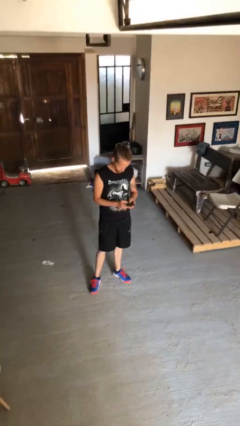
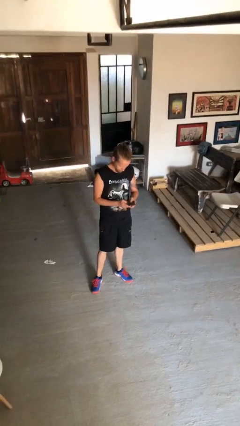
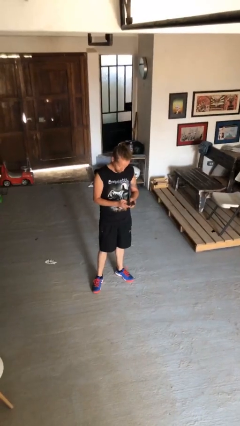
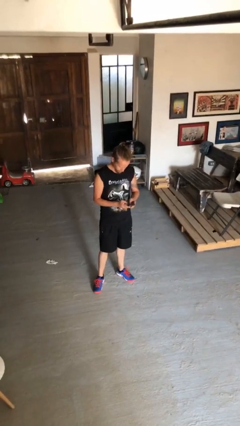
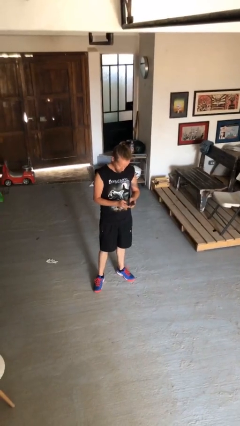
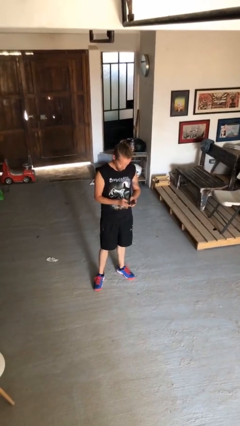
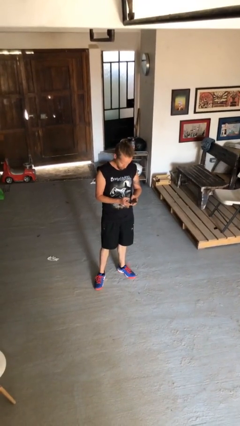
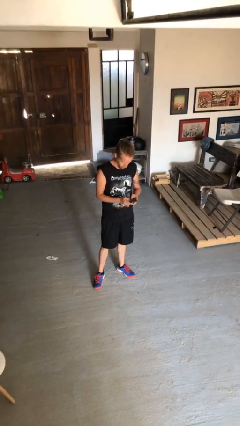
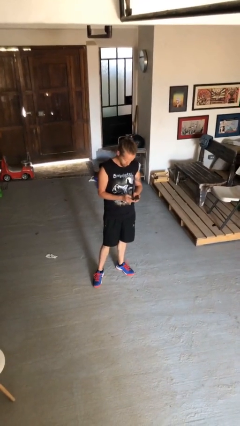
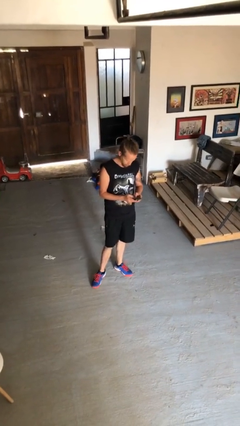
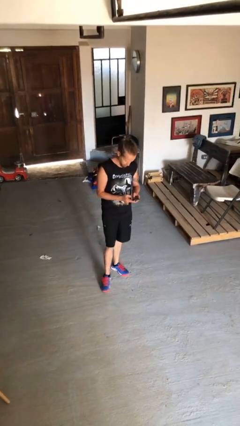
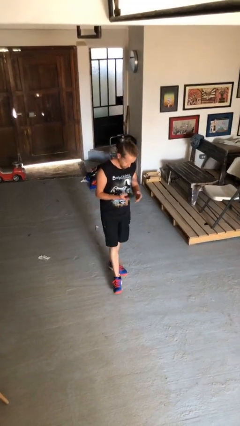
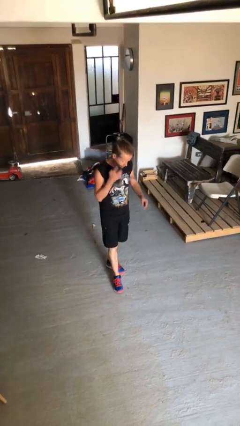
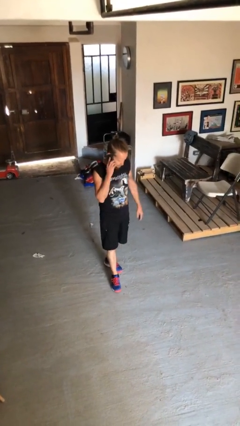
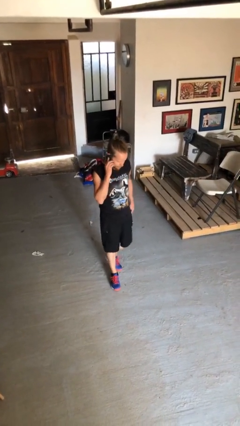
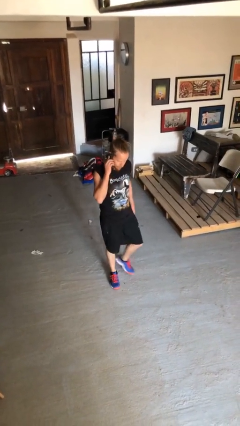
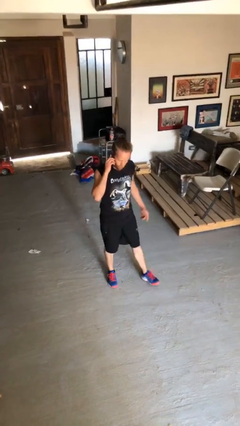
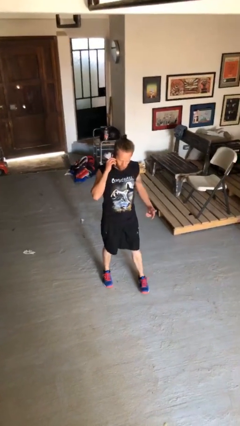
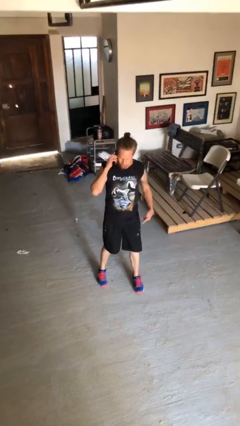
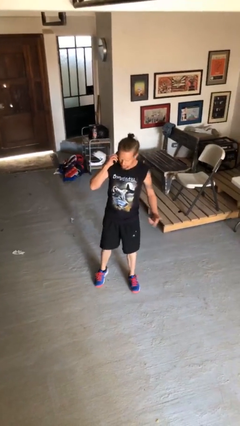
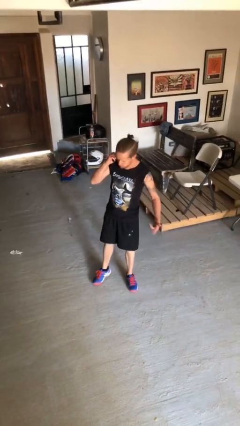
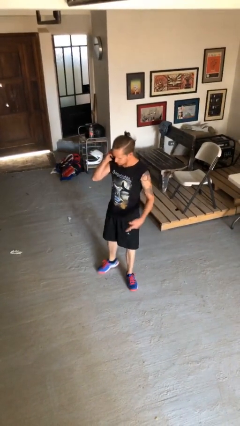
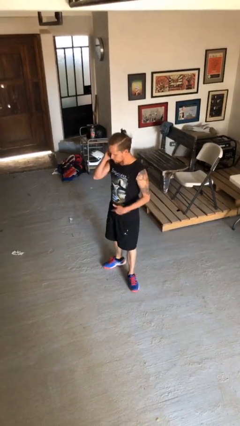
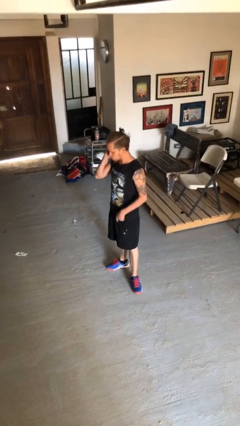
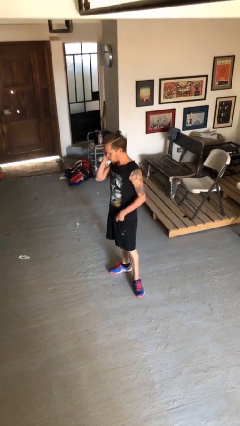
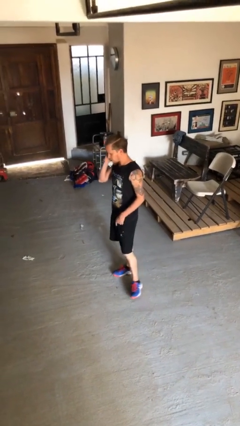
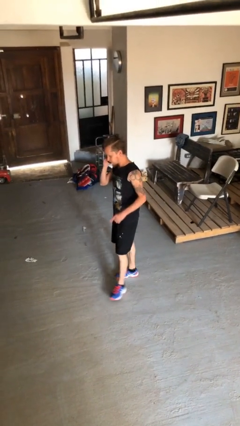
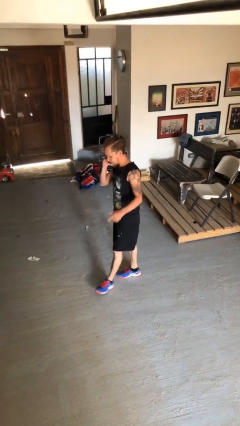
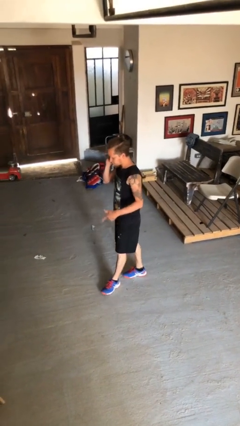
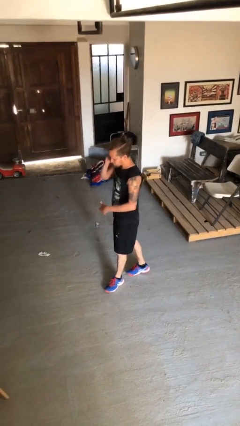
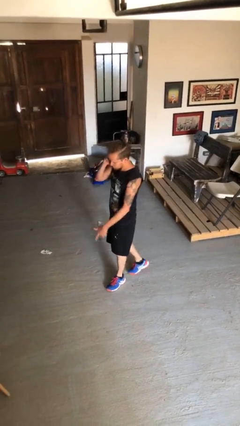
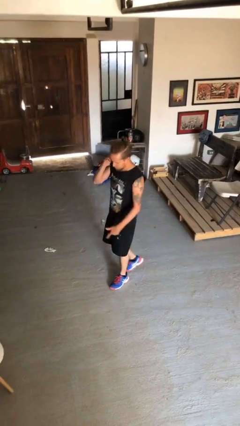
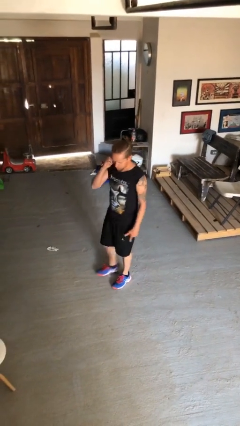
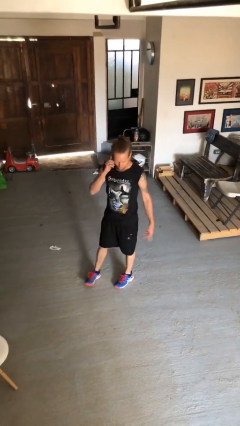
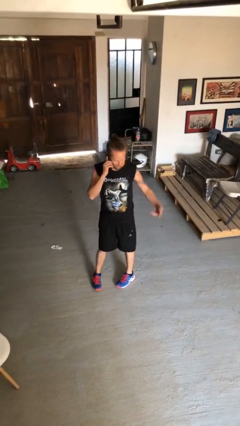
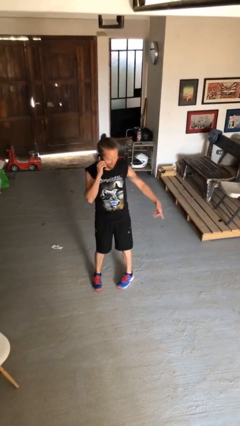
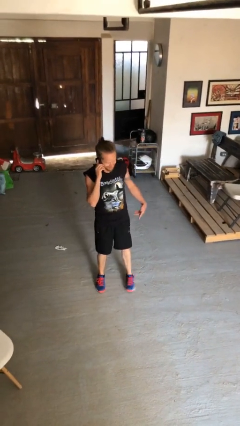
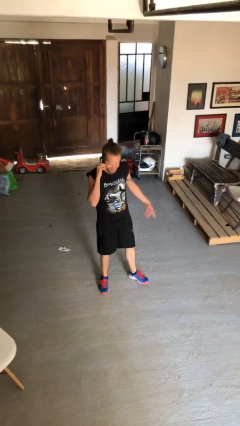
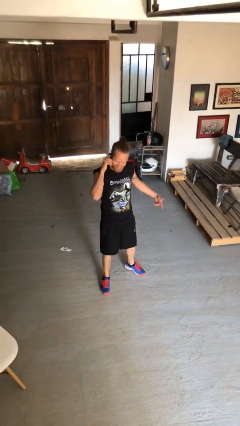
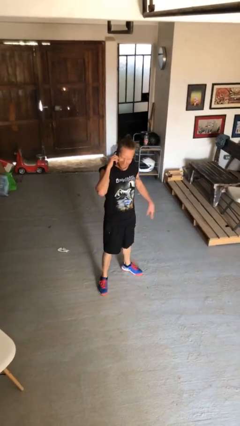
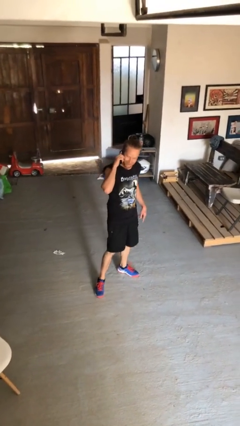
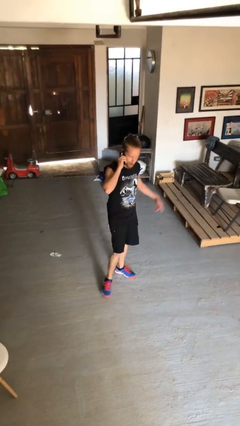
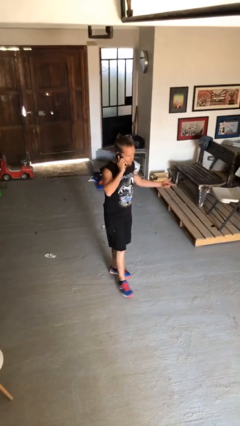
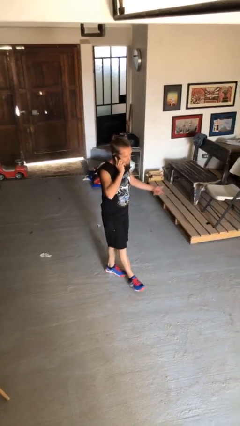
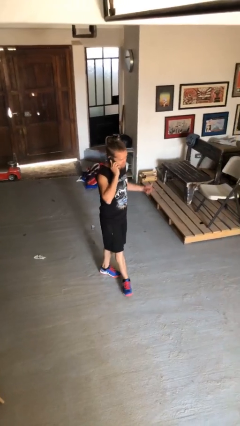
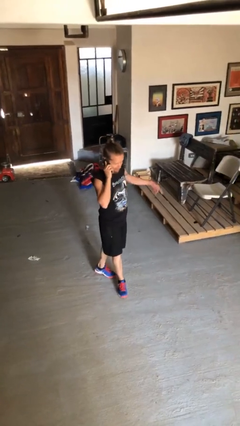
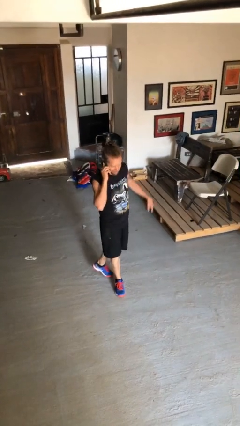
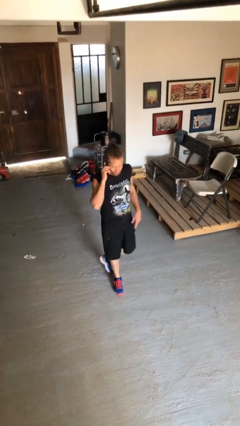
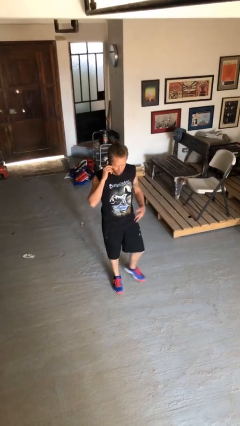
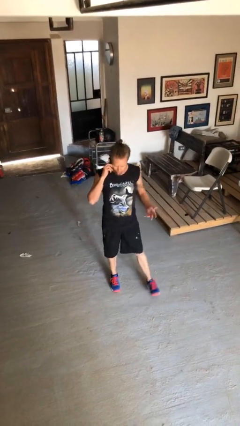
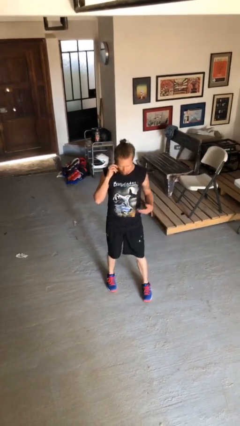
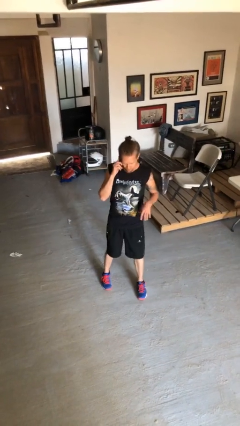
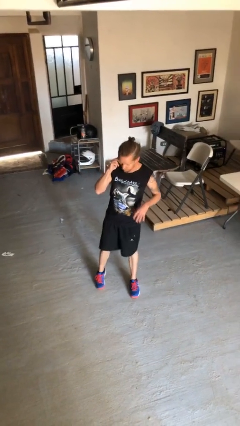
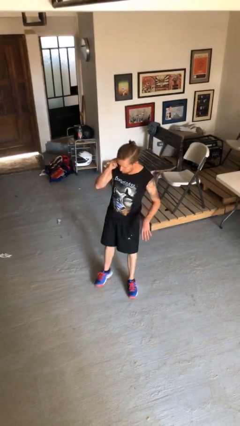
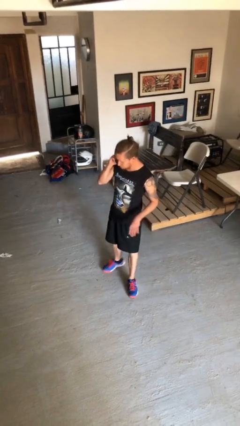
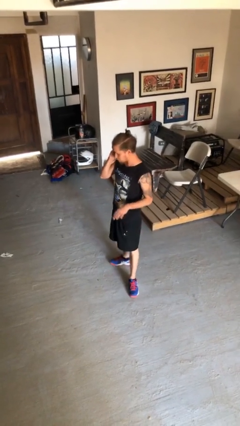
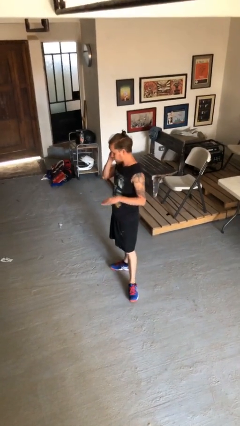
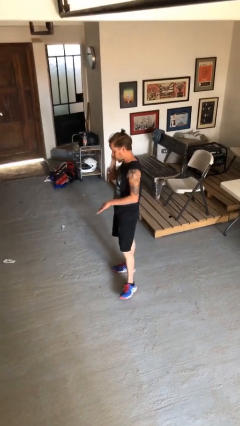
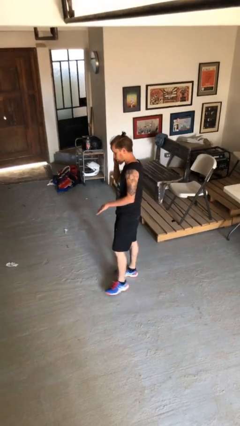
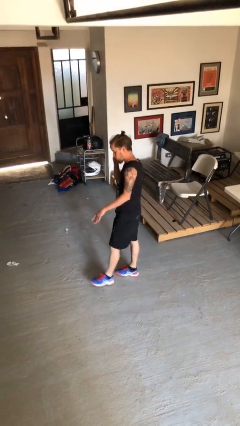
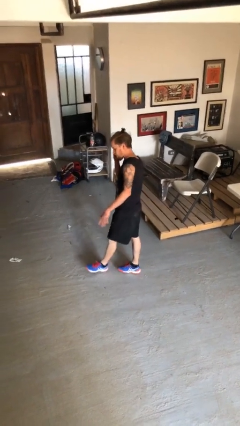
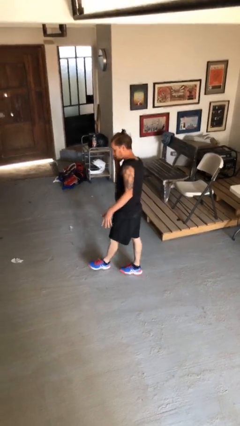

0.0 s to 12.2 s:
person talks on phone

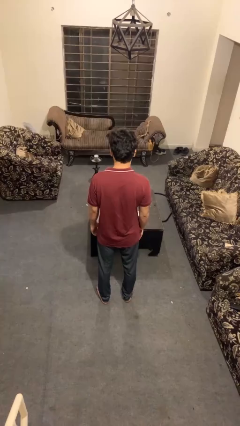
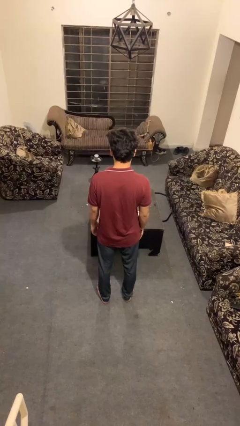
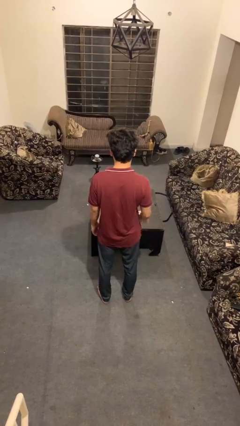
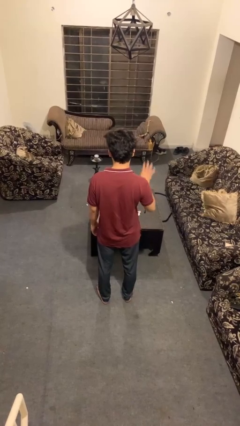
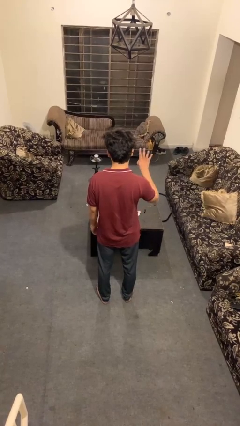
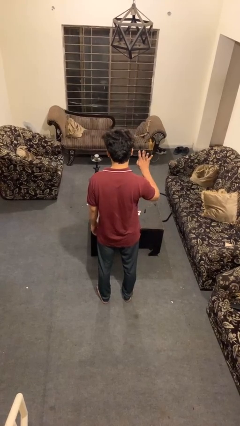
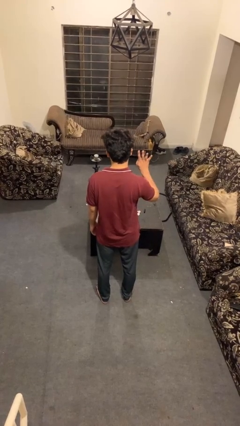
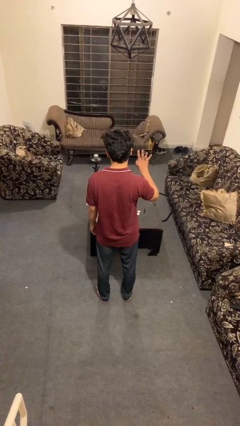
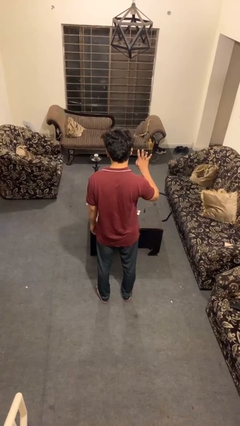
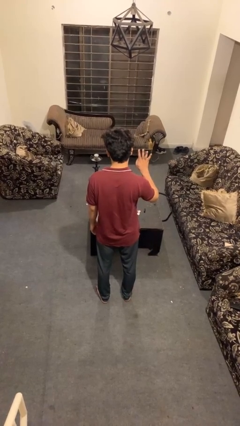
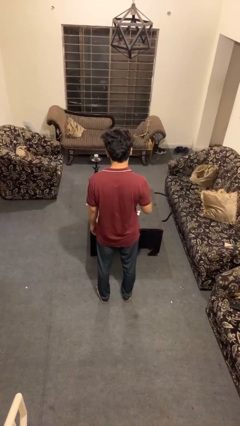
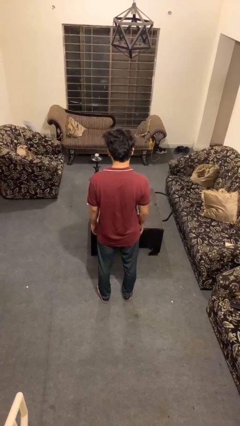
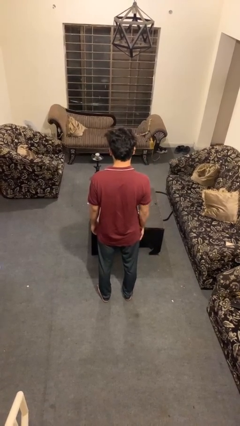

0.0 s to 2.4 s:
person gestures number four

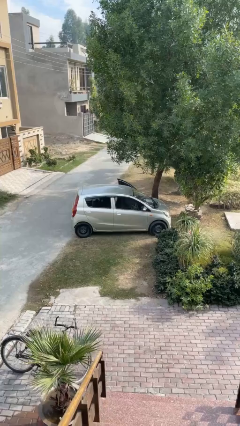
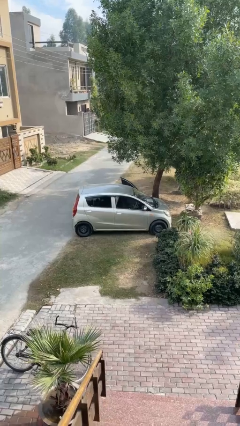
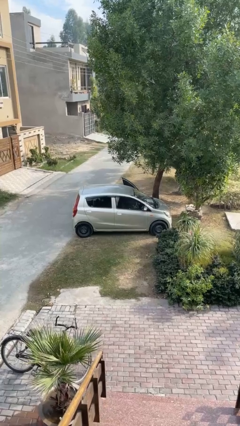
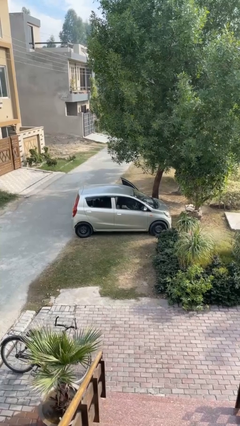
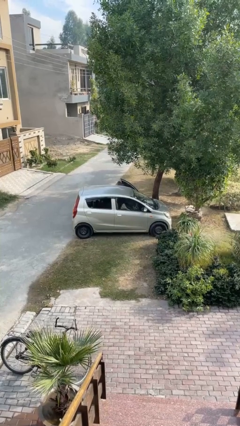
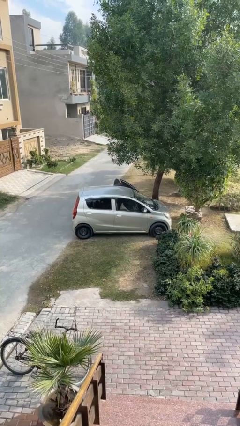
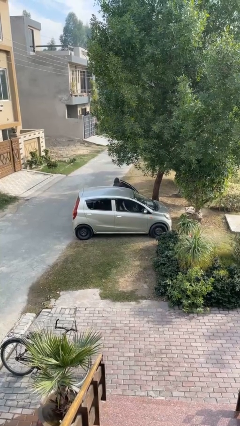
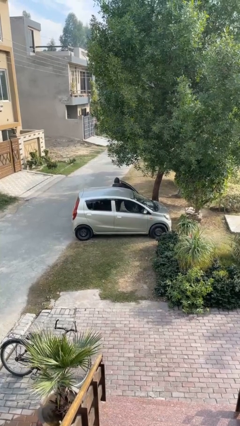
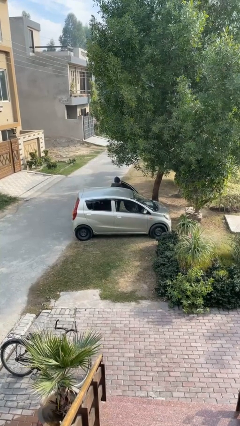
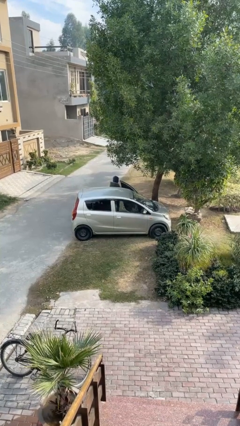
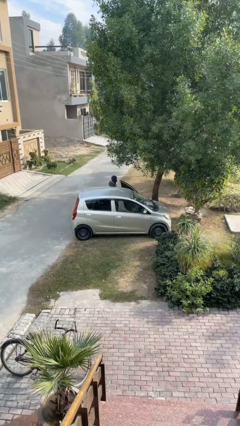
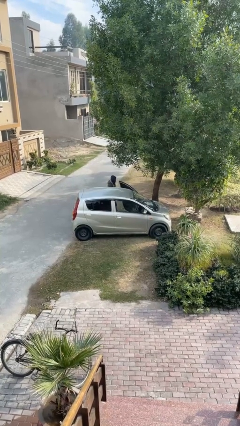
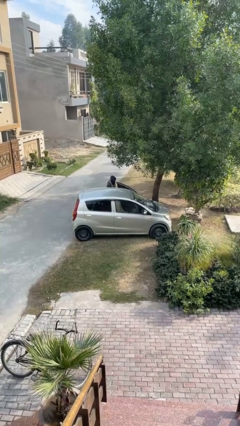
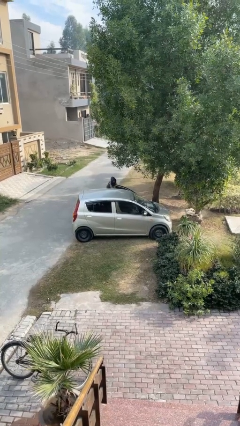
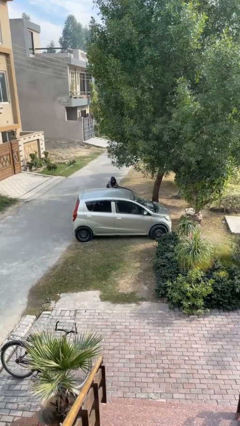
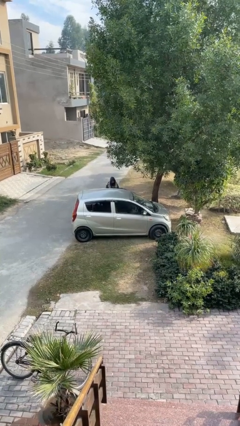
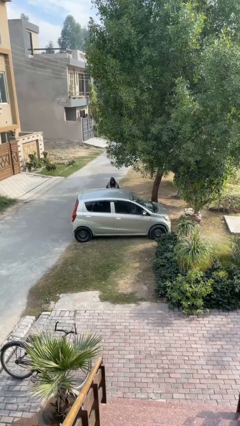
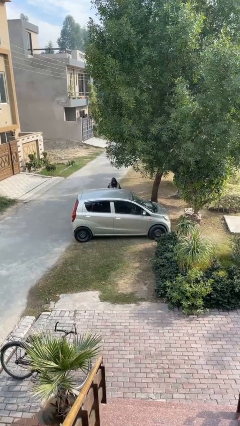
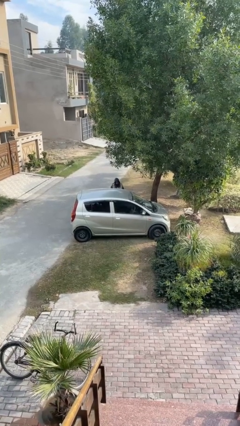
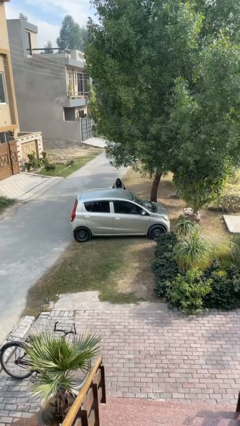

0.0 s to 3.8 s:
car drops off person
